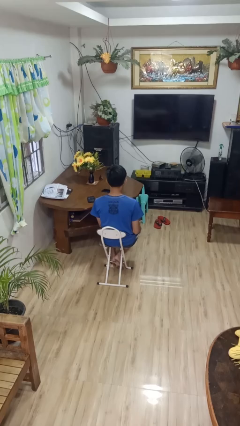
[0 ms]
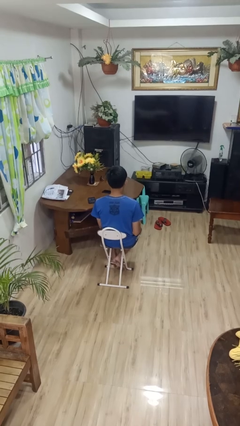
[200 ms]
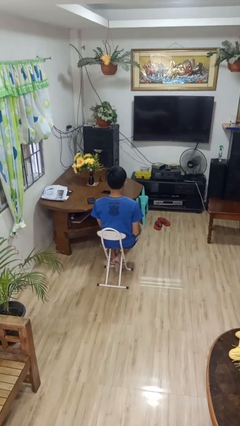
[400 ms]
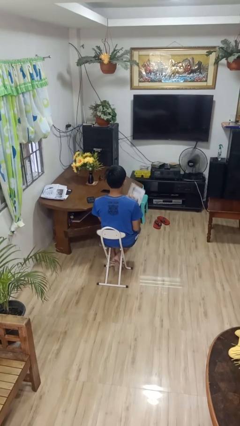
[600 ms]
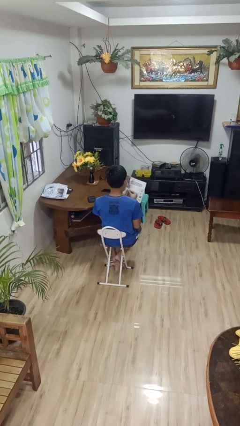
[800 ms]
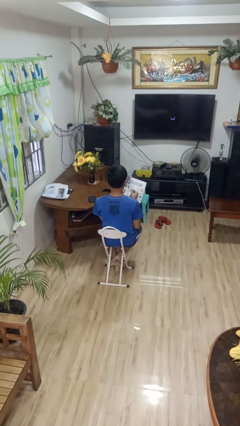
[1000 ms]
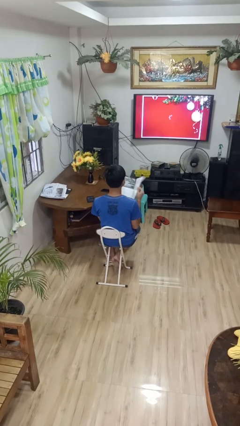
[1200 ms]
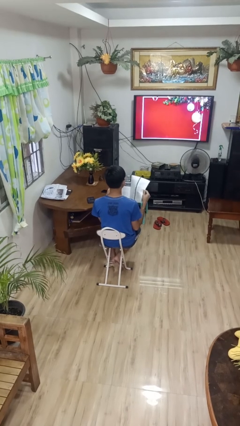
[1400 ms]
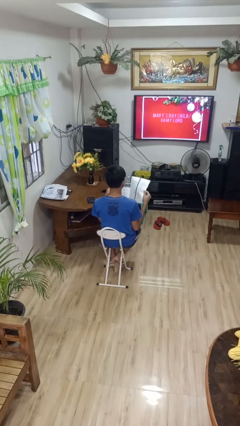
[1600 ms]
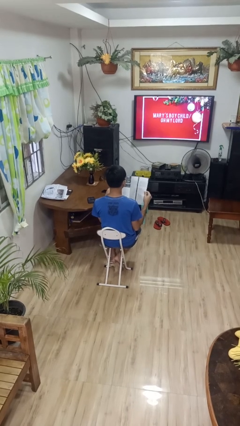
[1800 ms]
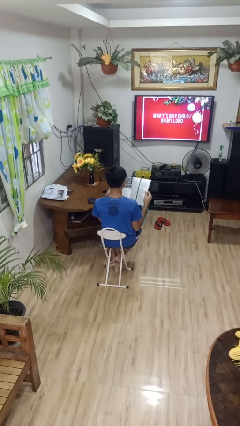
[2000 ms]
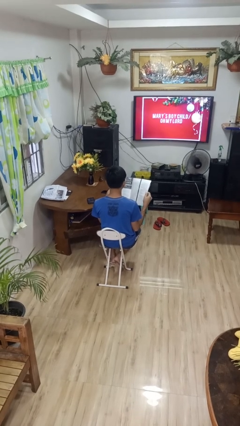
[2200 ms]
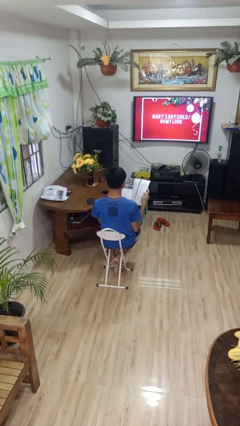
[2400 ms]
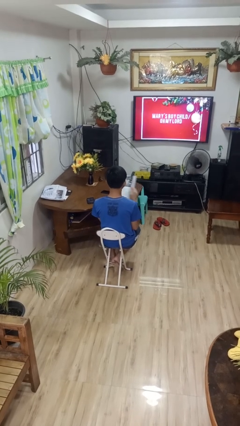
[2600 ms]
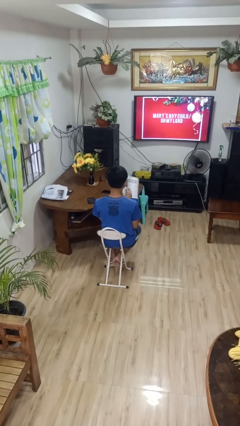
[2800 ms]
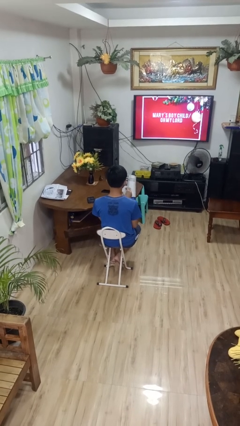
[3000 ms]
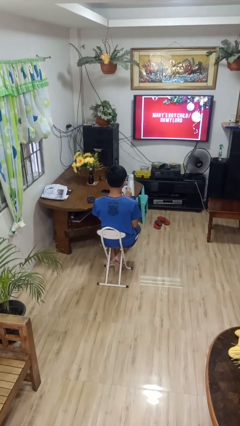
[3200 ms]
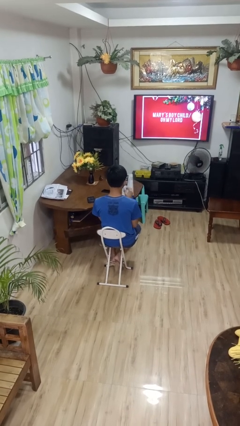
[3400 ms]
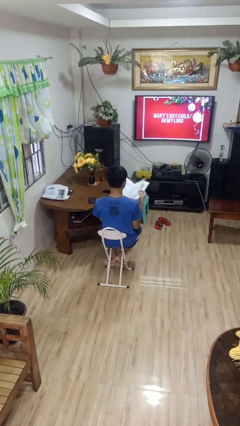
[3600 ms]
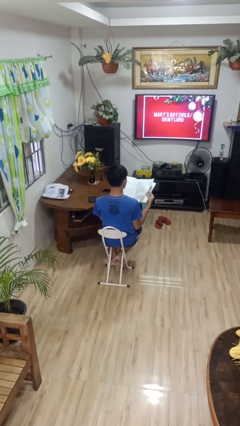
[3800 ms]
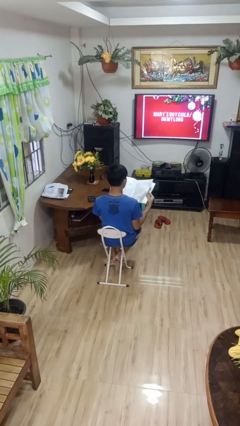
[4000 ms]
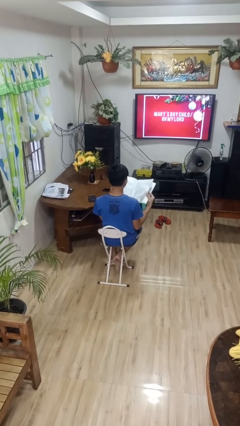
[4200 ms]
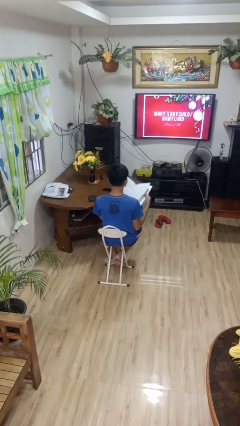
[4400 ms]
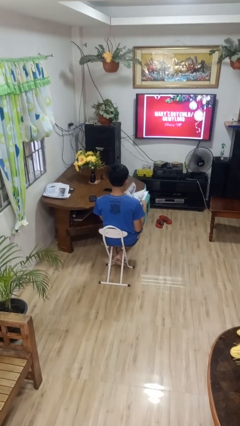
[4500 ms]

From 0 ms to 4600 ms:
person reads magazine

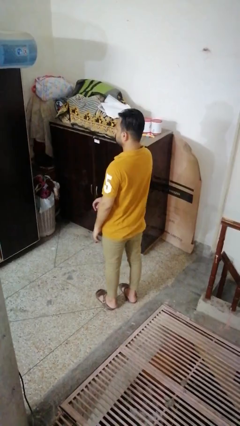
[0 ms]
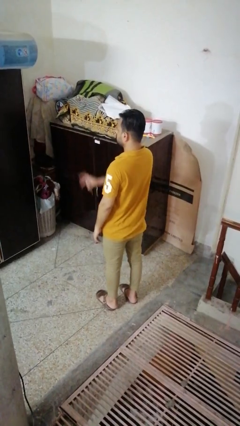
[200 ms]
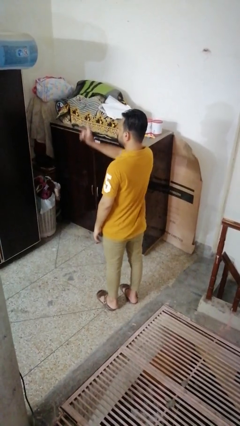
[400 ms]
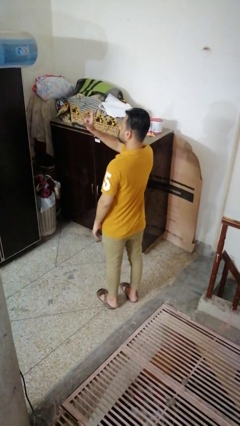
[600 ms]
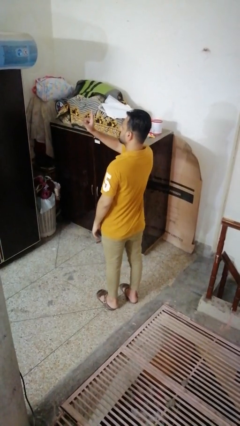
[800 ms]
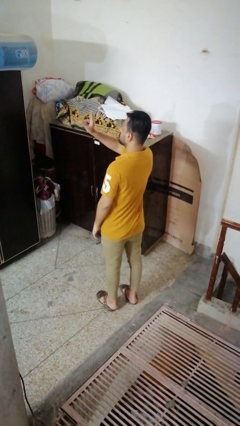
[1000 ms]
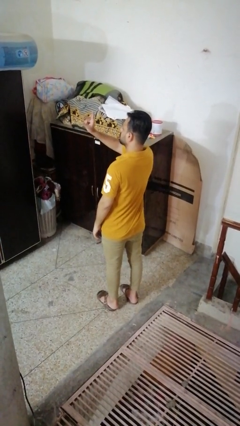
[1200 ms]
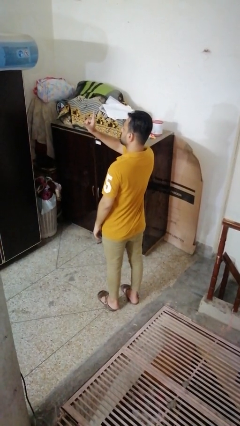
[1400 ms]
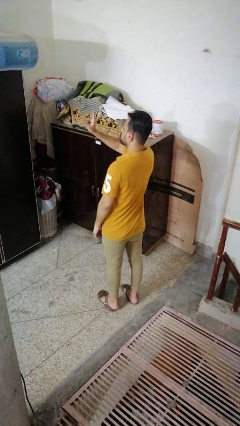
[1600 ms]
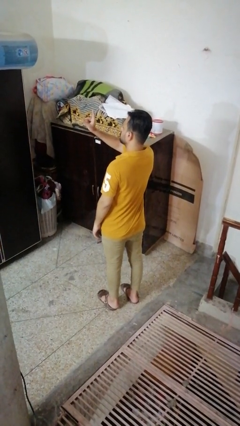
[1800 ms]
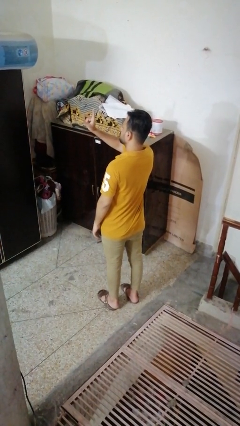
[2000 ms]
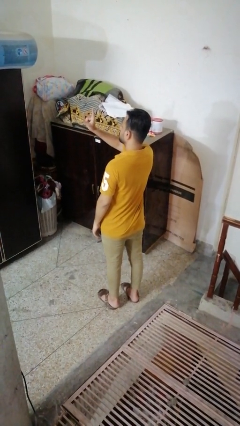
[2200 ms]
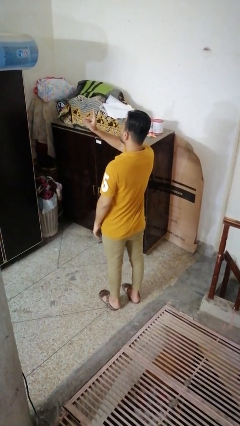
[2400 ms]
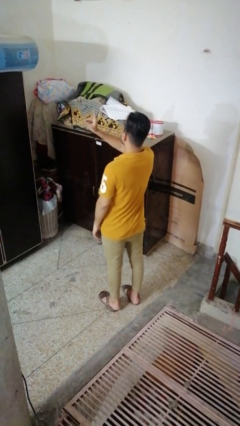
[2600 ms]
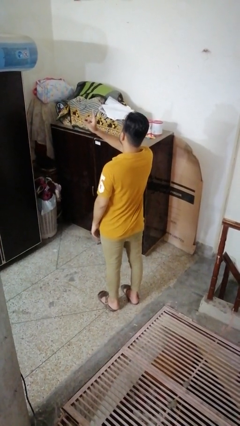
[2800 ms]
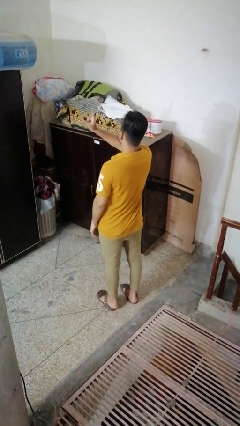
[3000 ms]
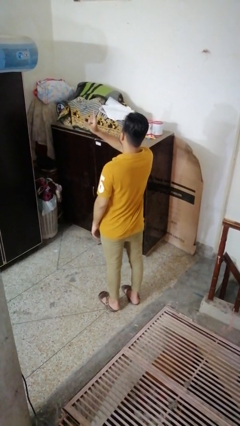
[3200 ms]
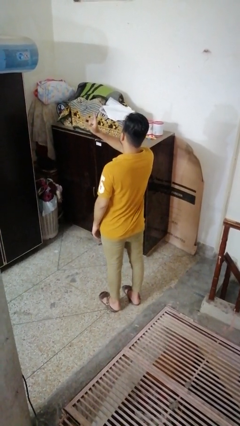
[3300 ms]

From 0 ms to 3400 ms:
person snaps fingers

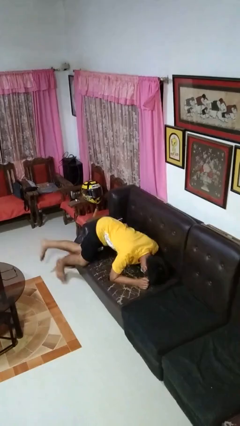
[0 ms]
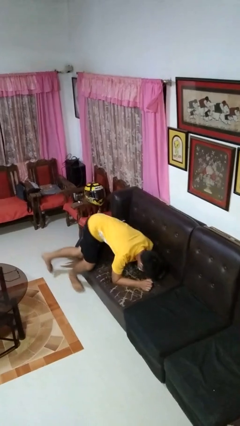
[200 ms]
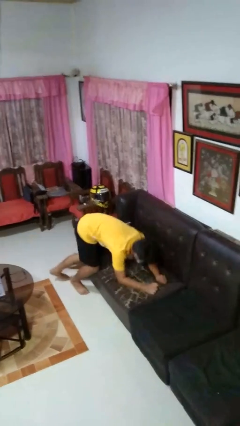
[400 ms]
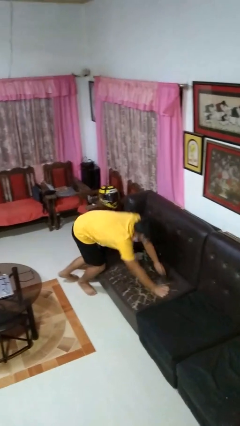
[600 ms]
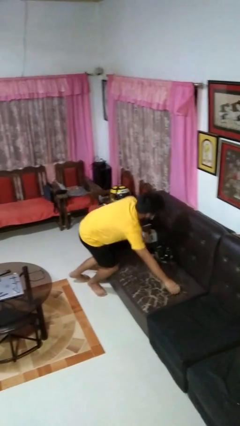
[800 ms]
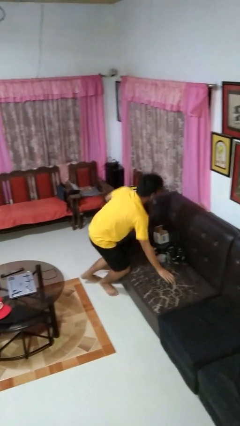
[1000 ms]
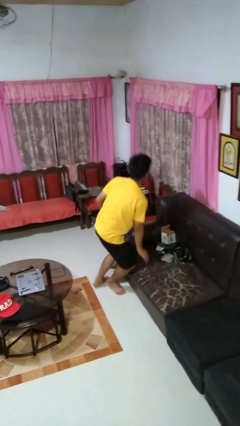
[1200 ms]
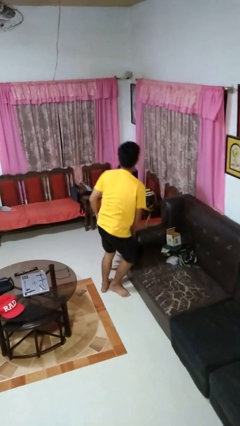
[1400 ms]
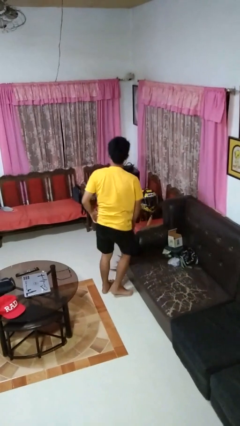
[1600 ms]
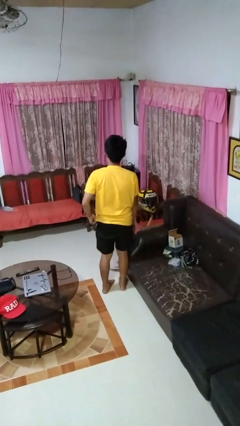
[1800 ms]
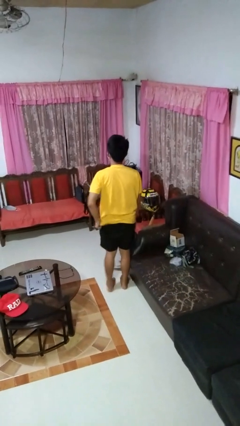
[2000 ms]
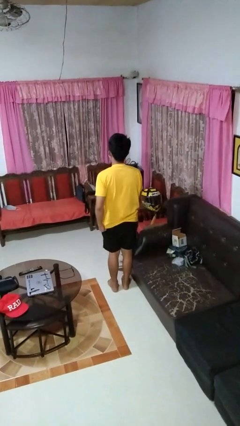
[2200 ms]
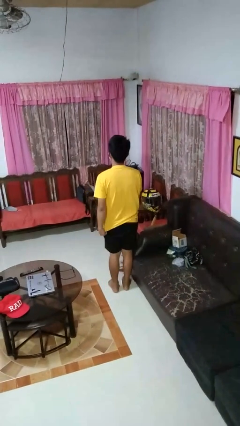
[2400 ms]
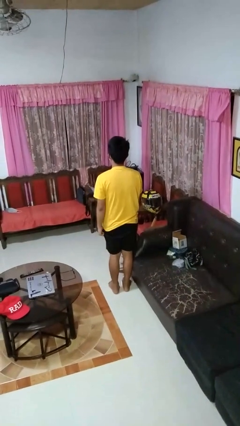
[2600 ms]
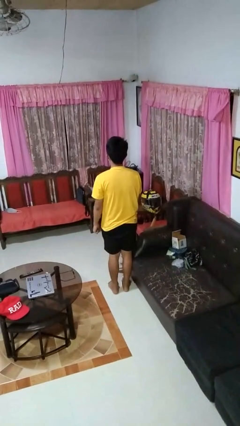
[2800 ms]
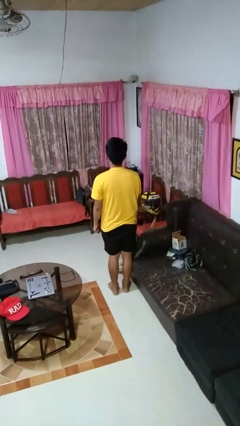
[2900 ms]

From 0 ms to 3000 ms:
person stands up

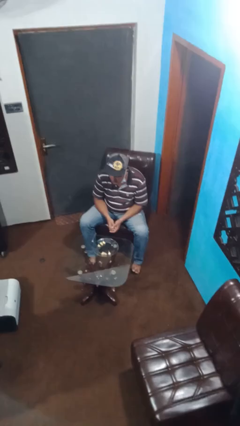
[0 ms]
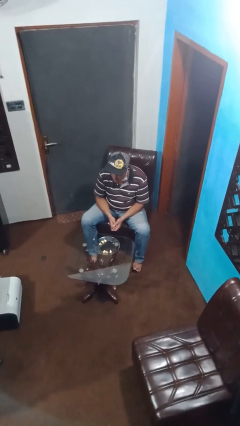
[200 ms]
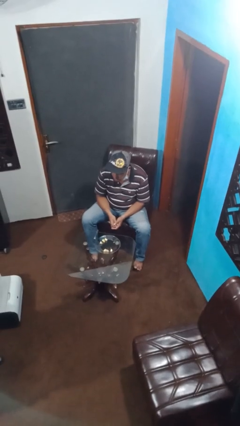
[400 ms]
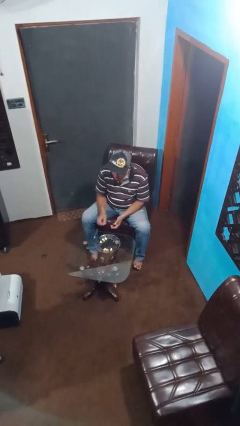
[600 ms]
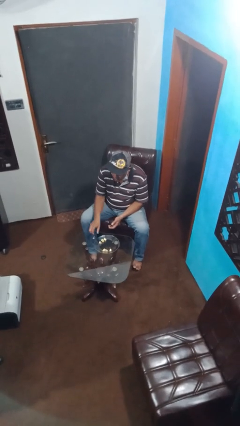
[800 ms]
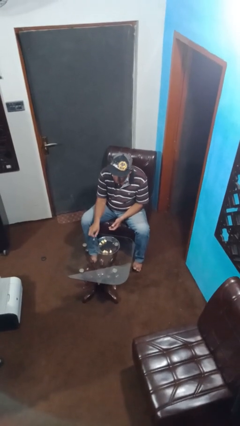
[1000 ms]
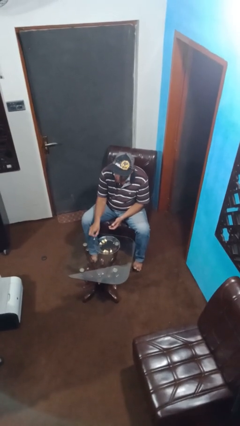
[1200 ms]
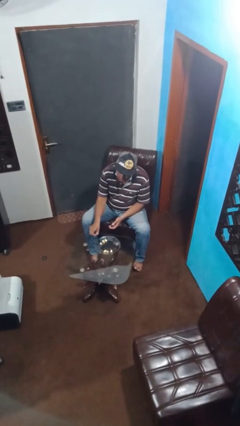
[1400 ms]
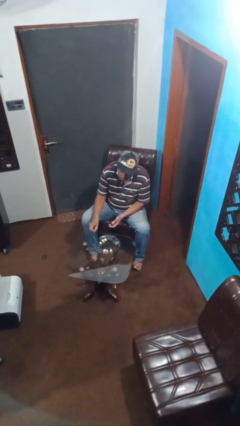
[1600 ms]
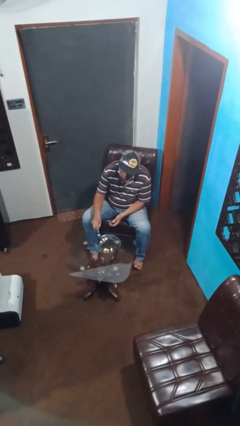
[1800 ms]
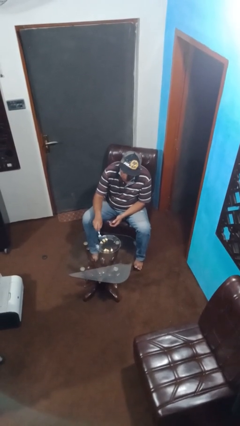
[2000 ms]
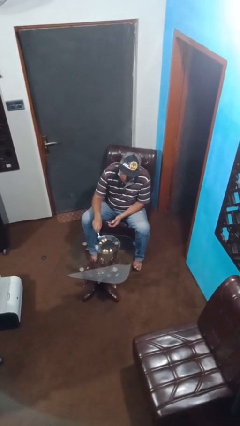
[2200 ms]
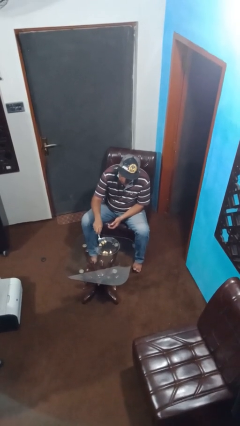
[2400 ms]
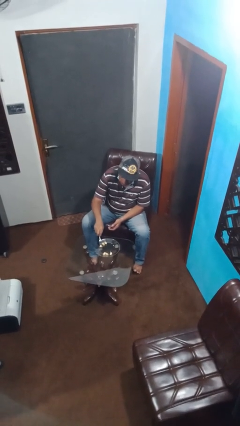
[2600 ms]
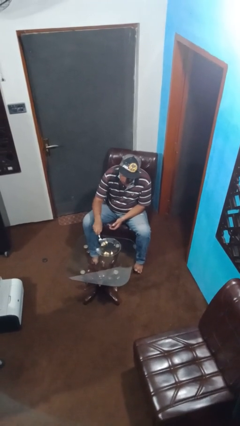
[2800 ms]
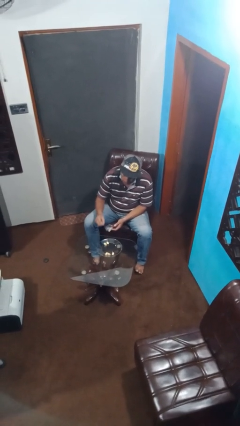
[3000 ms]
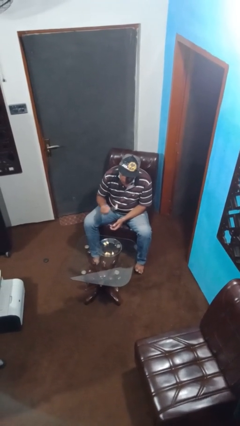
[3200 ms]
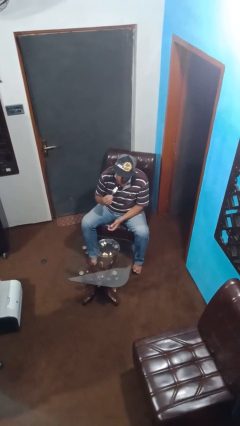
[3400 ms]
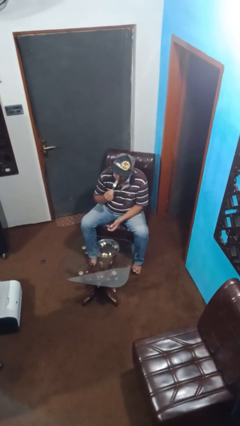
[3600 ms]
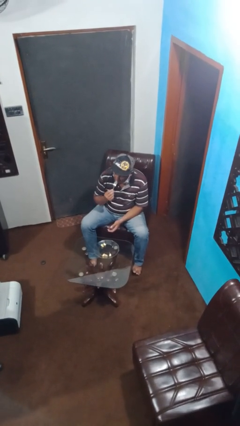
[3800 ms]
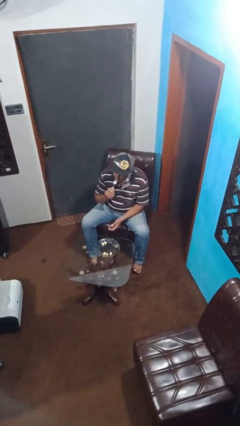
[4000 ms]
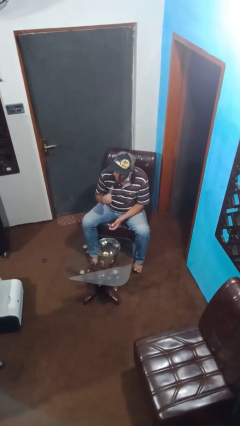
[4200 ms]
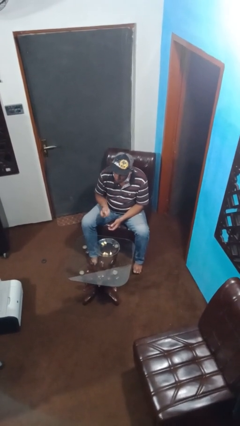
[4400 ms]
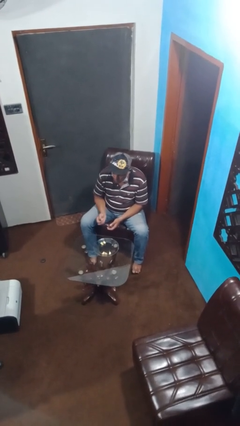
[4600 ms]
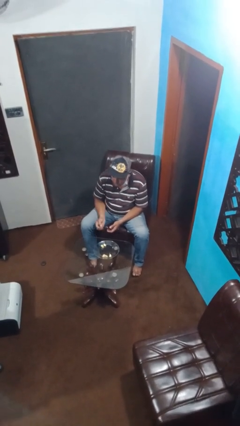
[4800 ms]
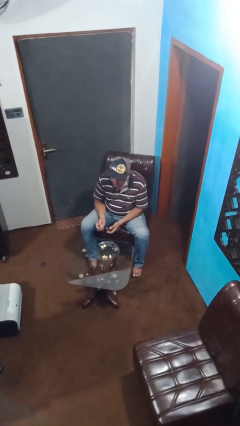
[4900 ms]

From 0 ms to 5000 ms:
person eats with utensil

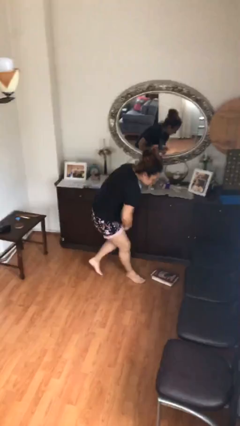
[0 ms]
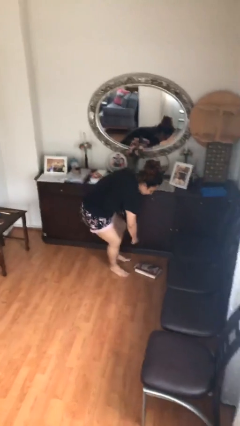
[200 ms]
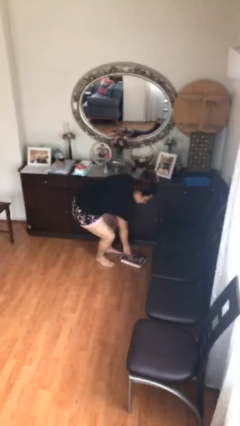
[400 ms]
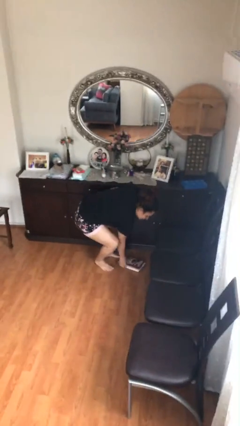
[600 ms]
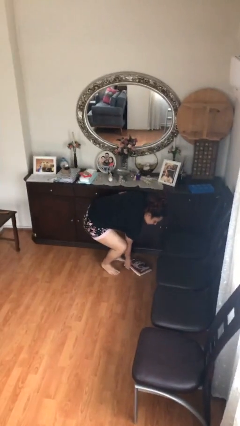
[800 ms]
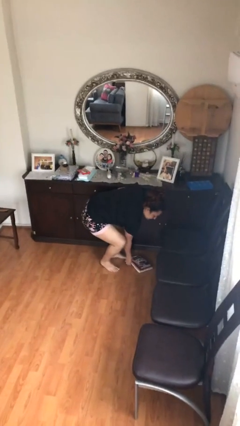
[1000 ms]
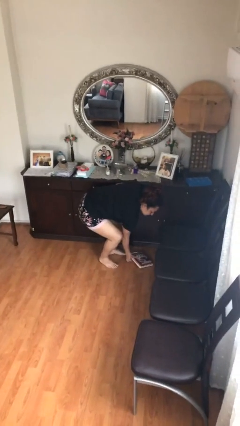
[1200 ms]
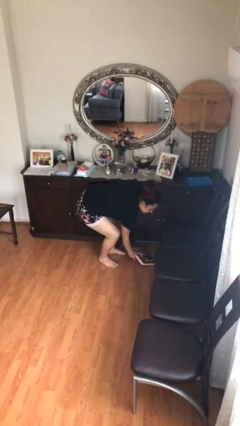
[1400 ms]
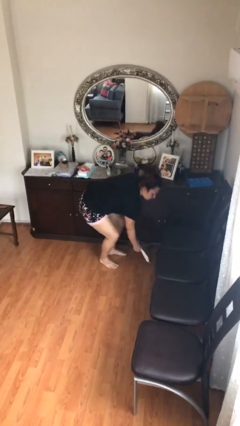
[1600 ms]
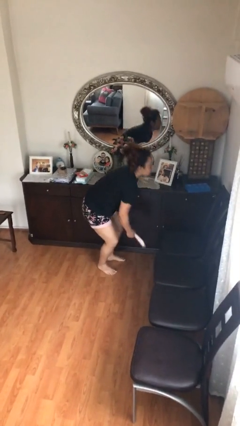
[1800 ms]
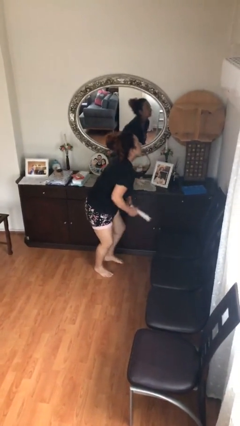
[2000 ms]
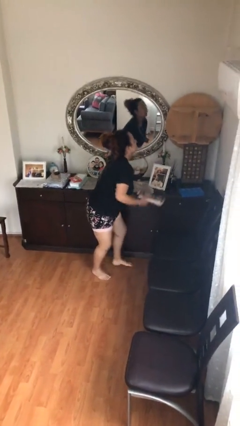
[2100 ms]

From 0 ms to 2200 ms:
person picks up object from floor
